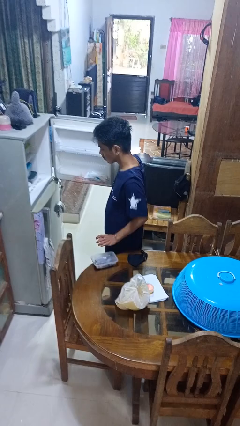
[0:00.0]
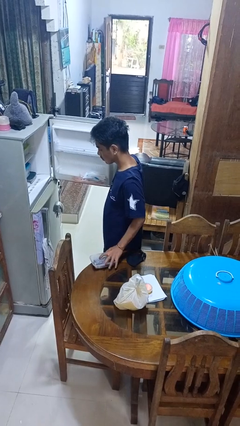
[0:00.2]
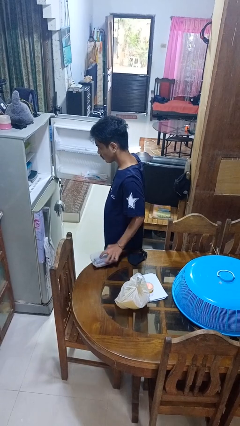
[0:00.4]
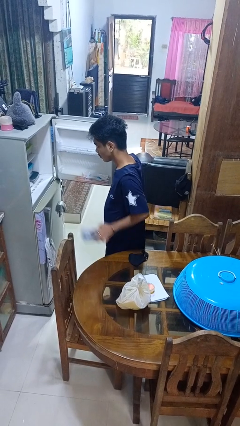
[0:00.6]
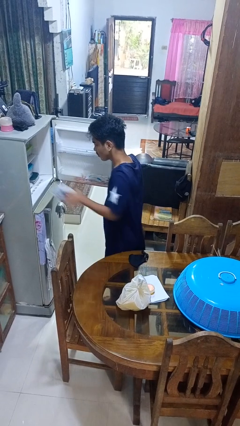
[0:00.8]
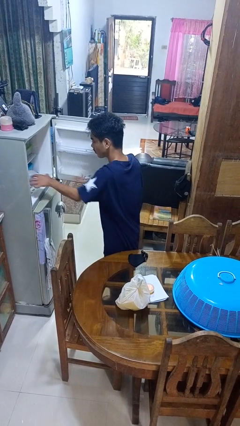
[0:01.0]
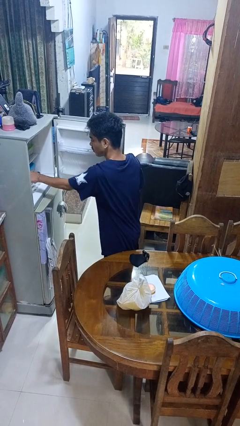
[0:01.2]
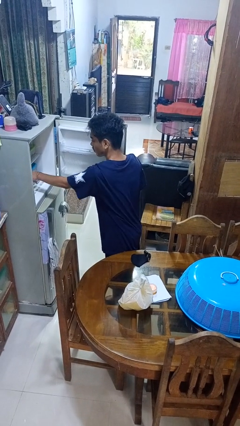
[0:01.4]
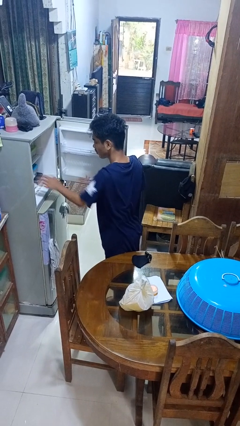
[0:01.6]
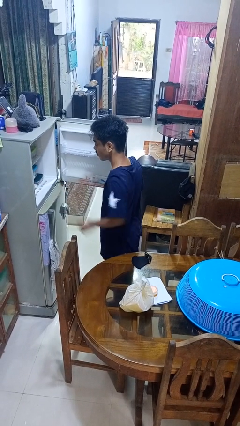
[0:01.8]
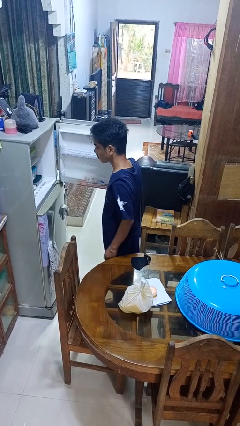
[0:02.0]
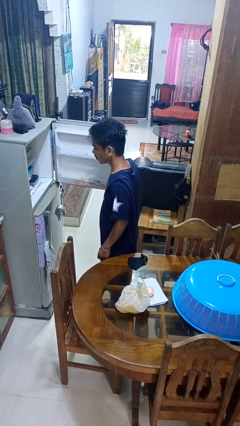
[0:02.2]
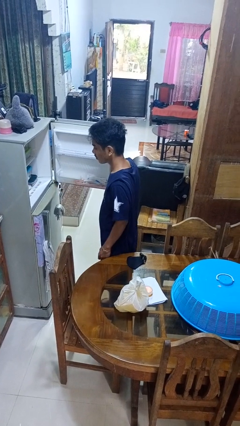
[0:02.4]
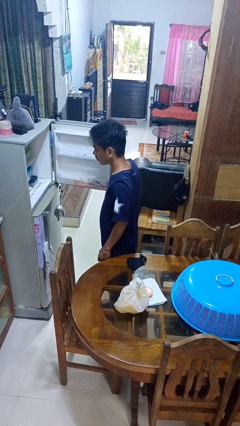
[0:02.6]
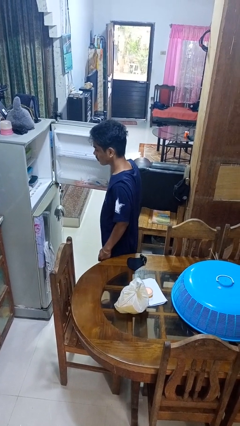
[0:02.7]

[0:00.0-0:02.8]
person puts object into refrigerator

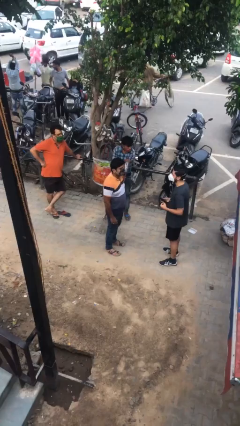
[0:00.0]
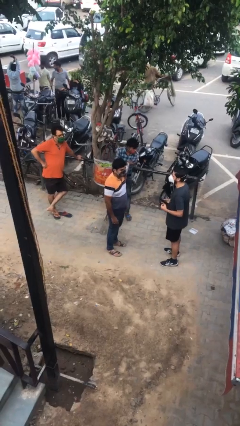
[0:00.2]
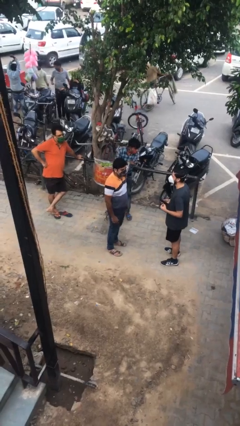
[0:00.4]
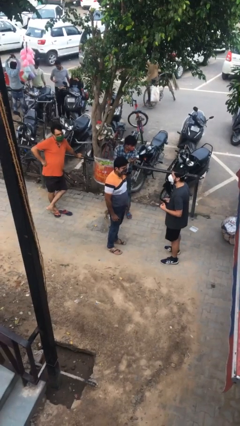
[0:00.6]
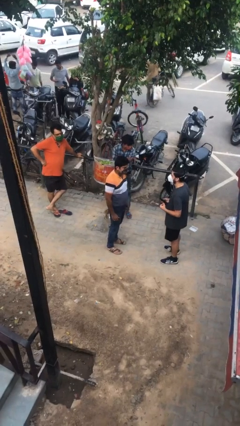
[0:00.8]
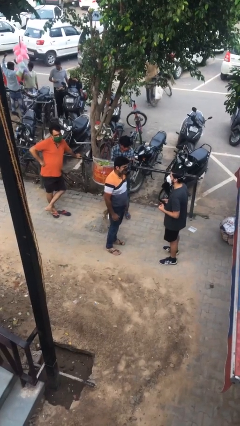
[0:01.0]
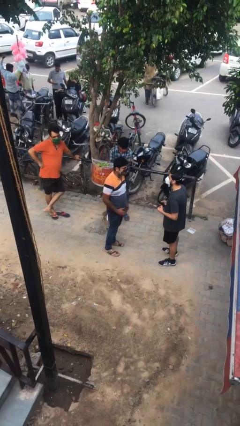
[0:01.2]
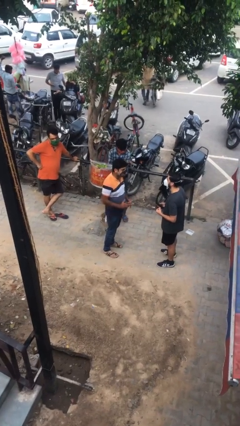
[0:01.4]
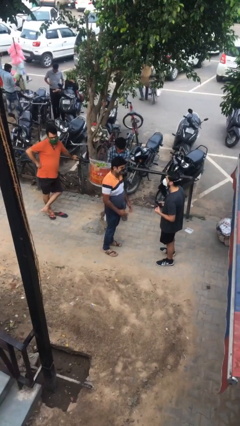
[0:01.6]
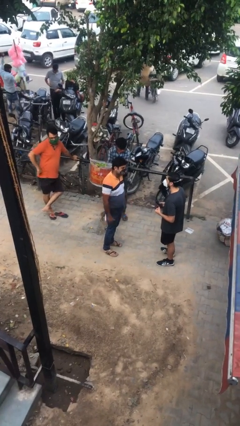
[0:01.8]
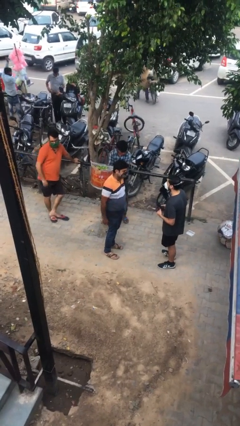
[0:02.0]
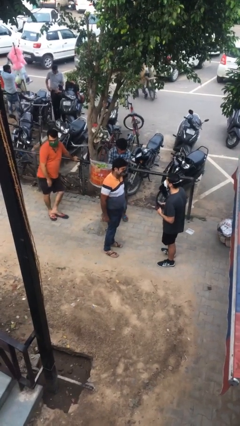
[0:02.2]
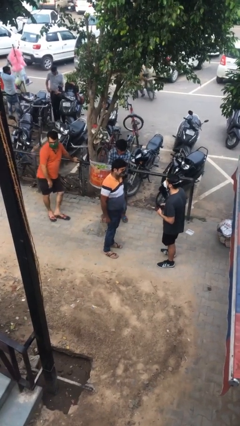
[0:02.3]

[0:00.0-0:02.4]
person talks to person

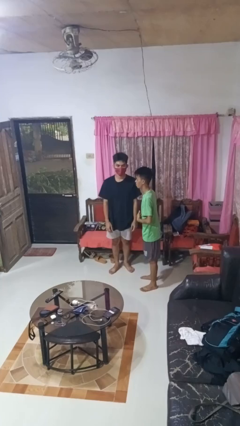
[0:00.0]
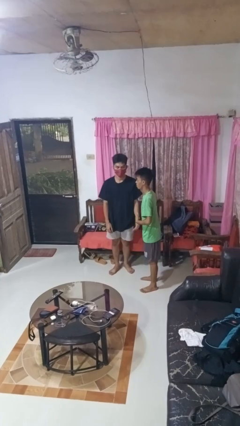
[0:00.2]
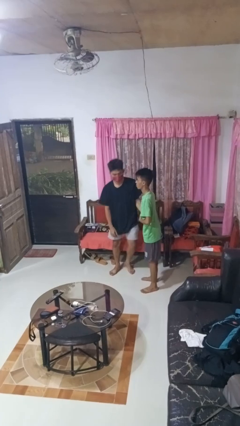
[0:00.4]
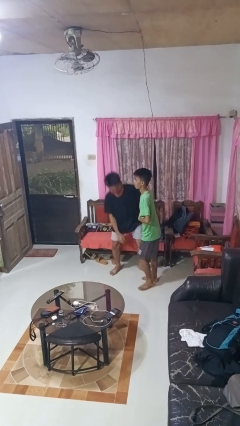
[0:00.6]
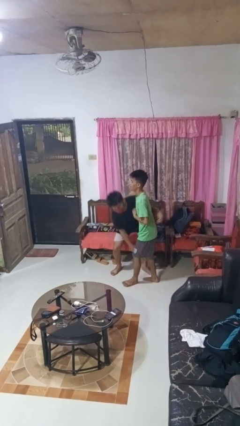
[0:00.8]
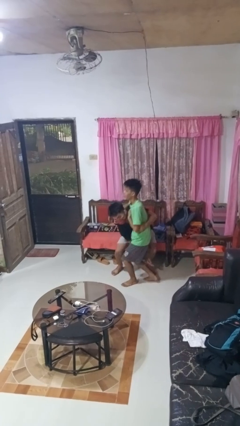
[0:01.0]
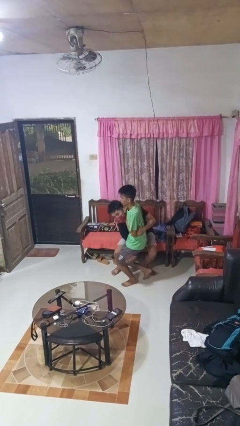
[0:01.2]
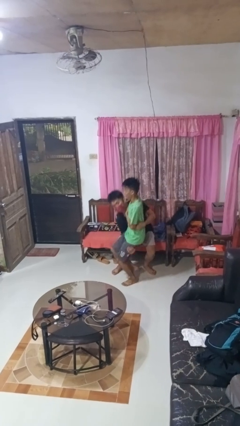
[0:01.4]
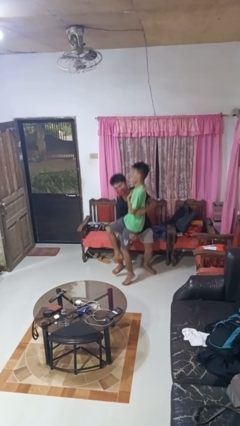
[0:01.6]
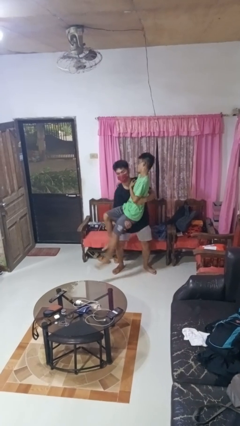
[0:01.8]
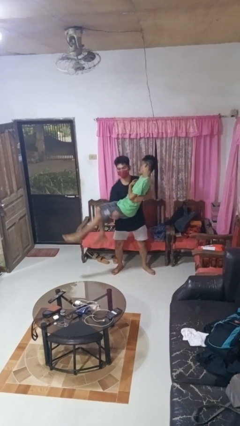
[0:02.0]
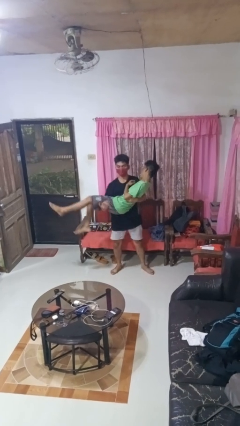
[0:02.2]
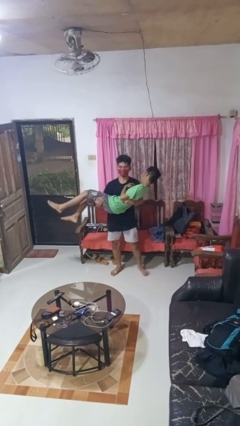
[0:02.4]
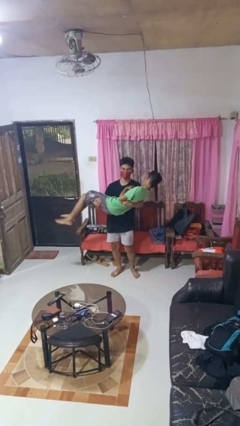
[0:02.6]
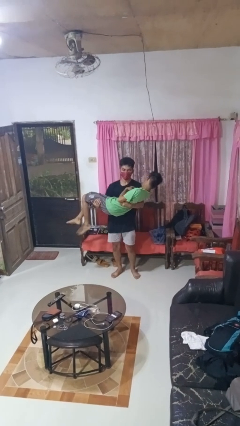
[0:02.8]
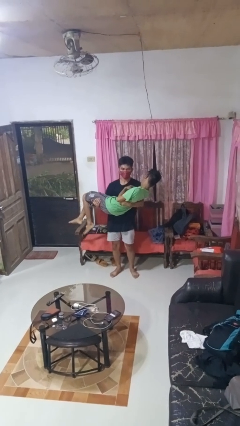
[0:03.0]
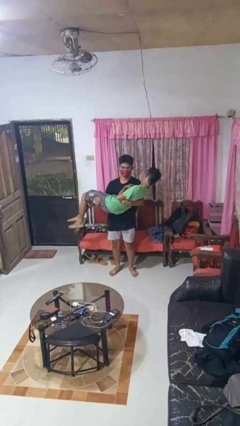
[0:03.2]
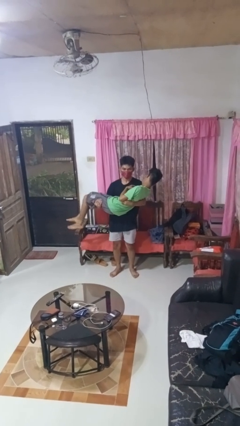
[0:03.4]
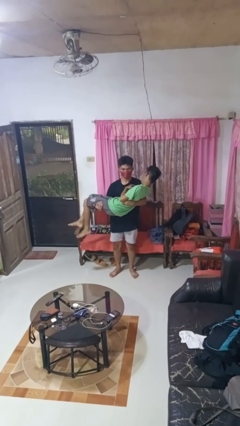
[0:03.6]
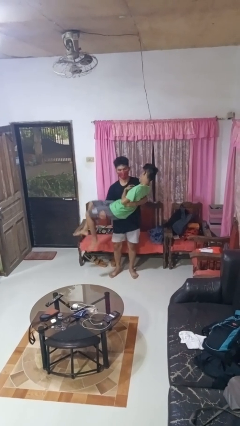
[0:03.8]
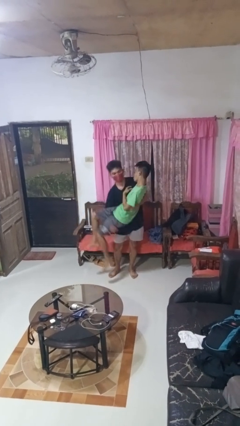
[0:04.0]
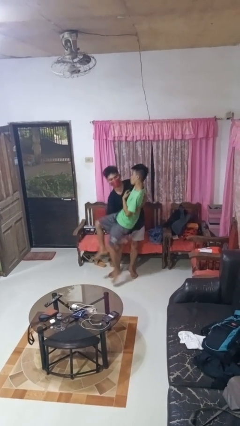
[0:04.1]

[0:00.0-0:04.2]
person carries person over shoulder

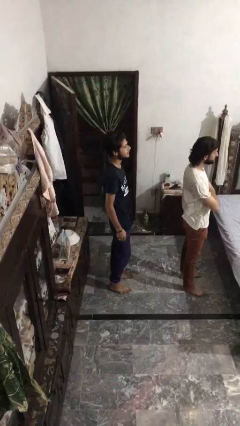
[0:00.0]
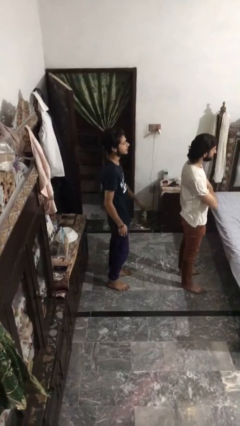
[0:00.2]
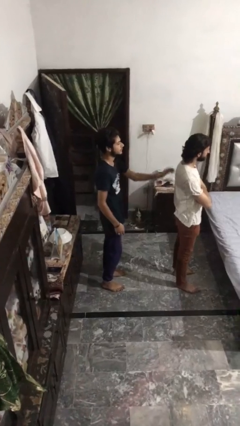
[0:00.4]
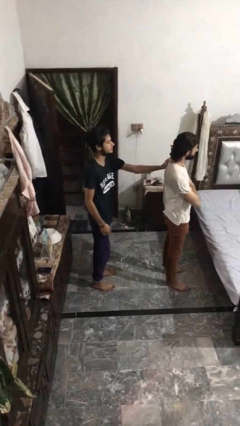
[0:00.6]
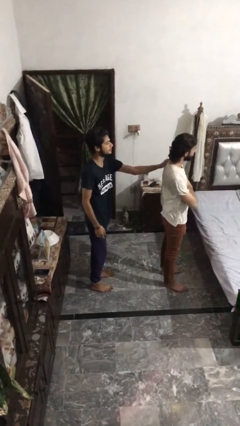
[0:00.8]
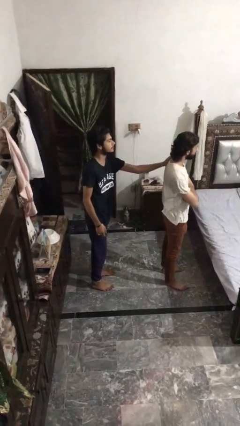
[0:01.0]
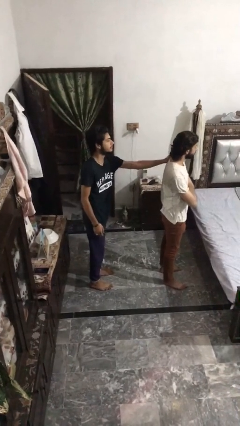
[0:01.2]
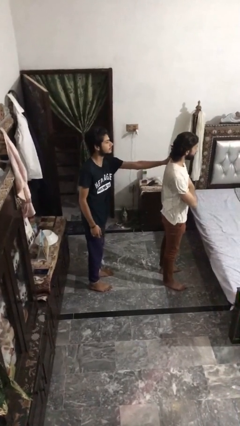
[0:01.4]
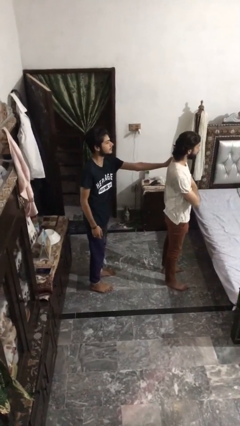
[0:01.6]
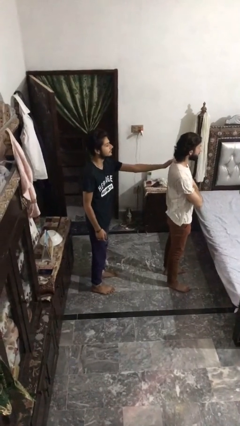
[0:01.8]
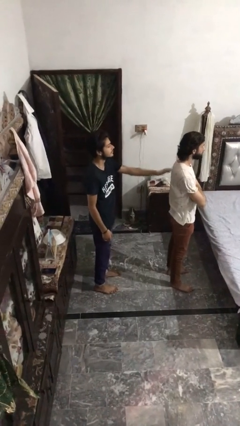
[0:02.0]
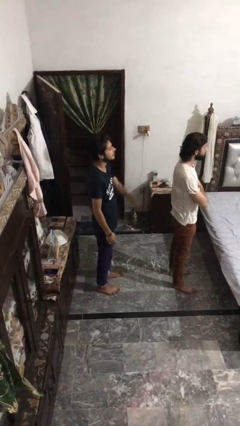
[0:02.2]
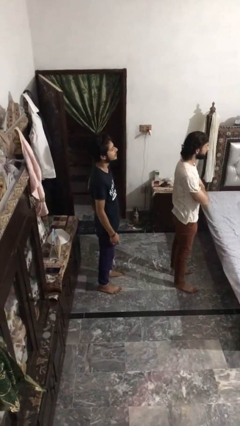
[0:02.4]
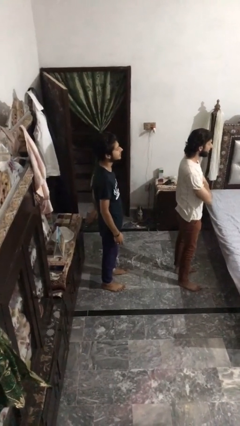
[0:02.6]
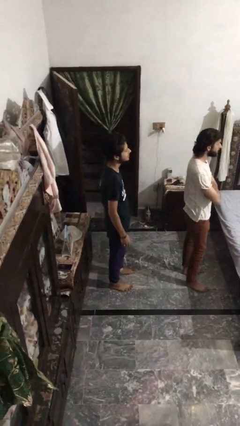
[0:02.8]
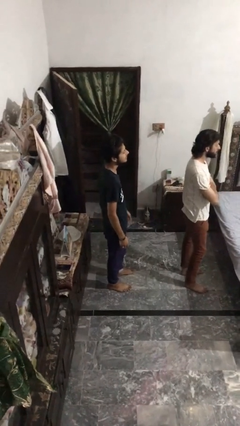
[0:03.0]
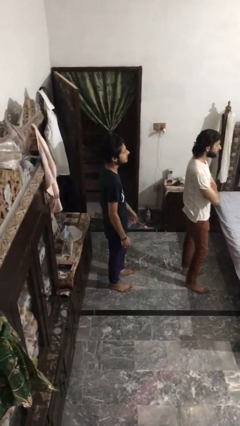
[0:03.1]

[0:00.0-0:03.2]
person touches back of person

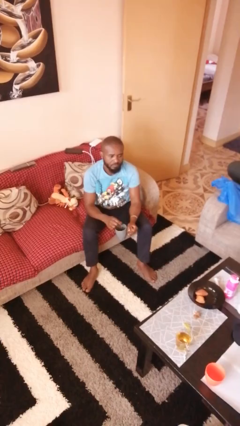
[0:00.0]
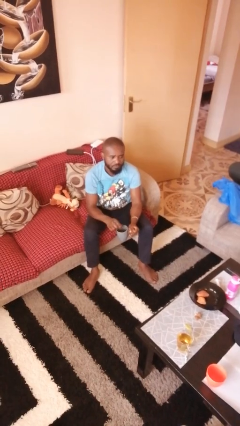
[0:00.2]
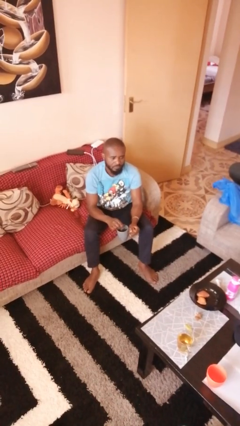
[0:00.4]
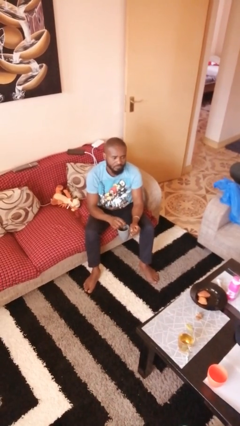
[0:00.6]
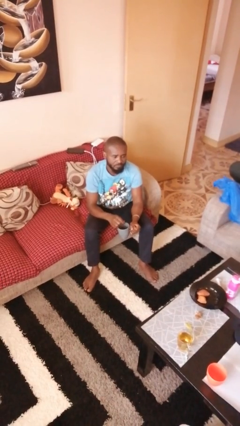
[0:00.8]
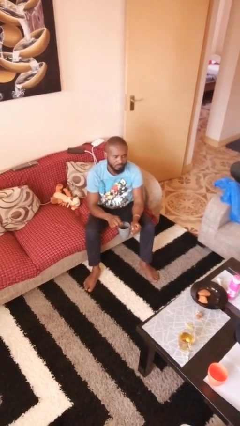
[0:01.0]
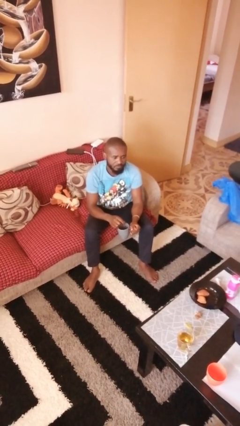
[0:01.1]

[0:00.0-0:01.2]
person stirs mug

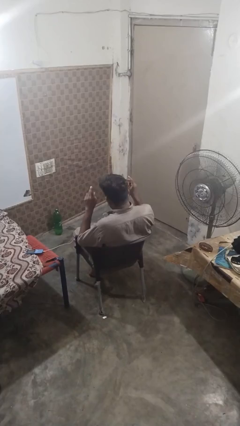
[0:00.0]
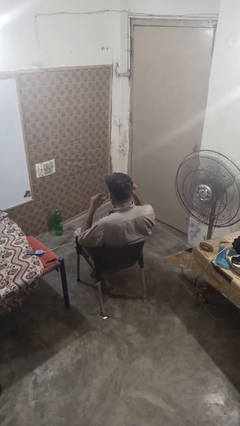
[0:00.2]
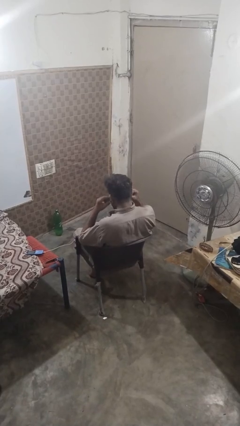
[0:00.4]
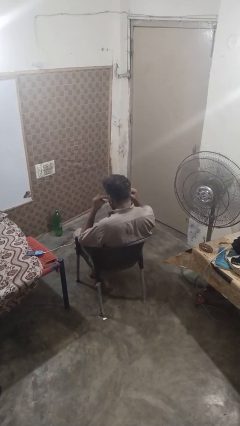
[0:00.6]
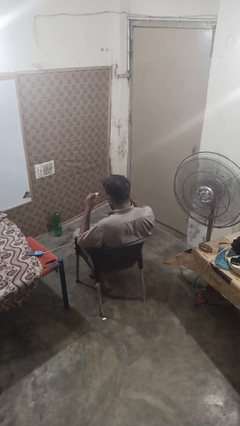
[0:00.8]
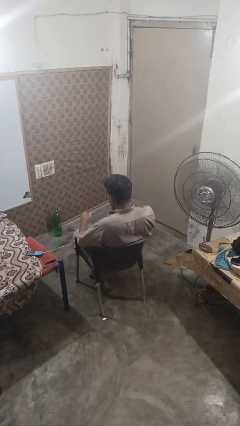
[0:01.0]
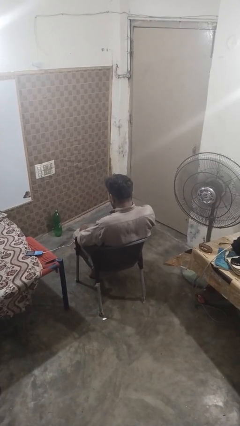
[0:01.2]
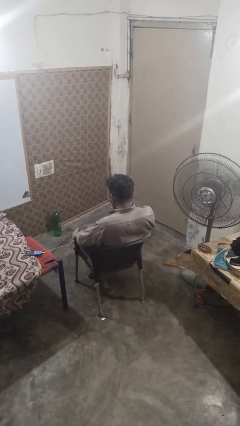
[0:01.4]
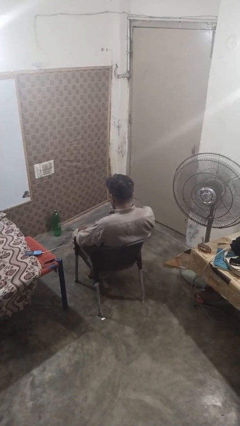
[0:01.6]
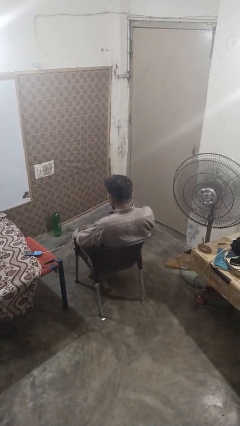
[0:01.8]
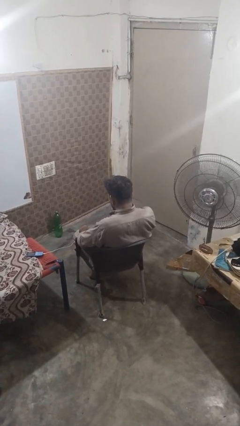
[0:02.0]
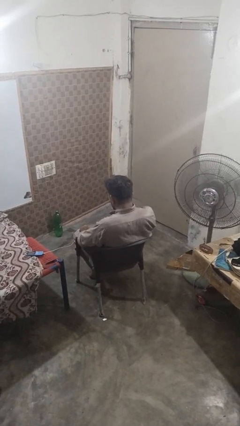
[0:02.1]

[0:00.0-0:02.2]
person takes off headphones

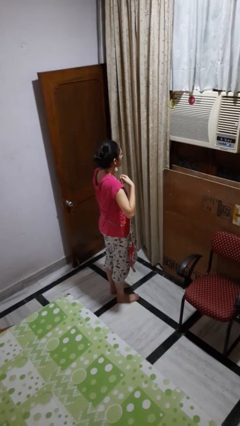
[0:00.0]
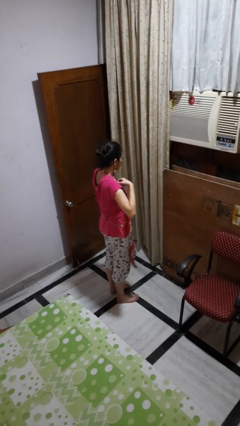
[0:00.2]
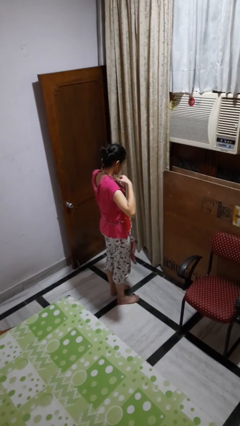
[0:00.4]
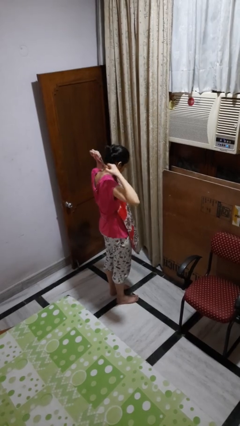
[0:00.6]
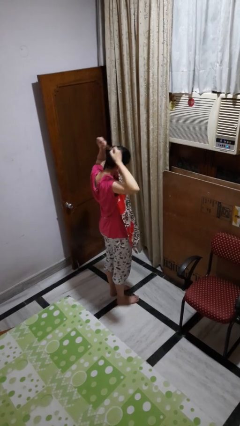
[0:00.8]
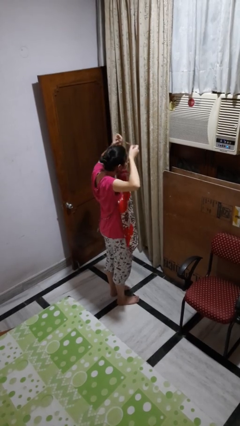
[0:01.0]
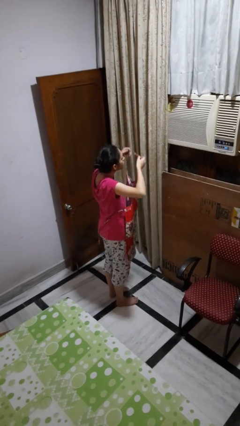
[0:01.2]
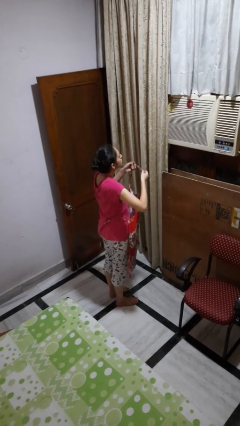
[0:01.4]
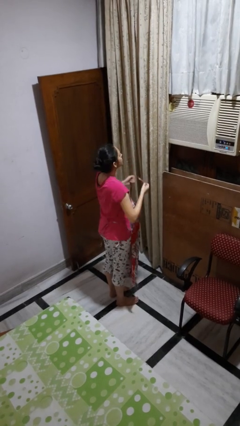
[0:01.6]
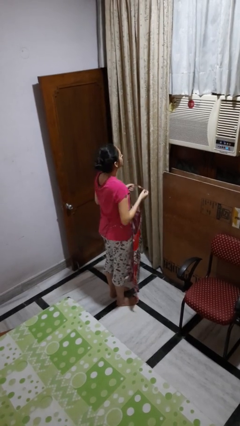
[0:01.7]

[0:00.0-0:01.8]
person takes off apron
